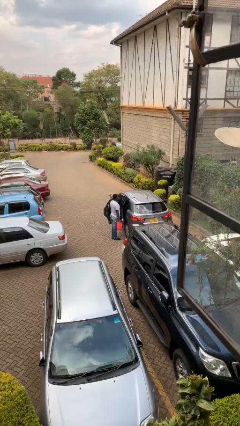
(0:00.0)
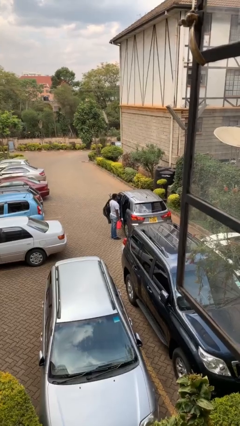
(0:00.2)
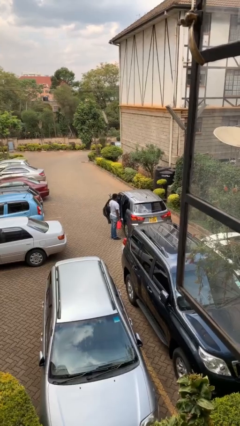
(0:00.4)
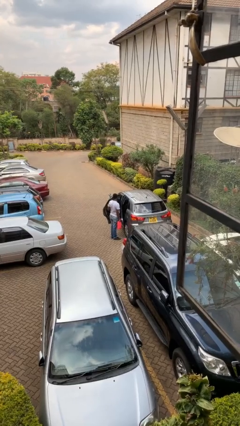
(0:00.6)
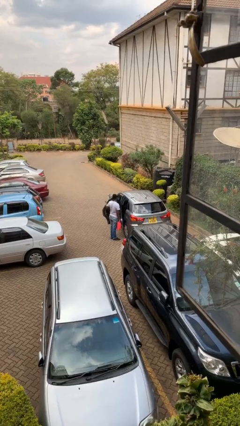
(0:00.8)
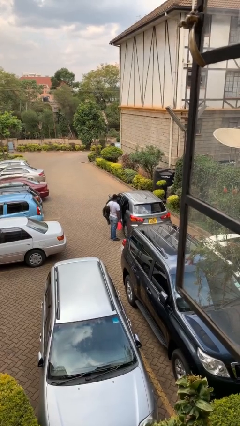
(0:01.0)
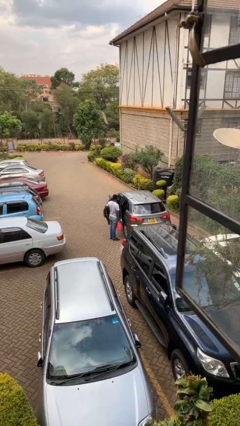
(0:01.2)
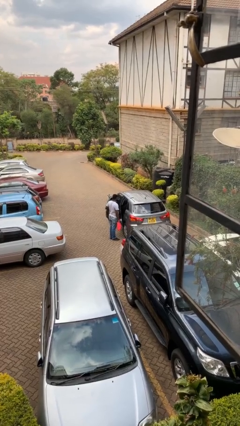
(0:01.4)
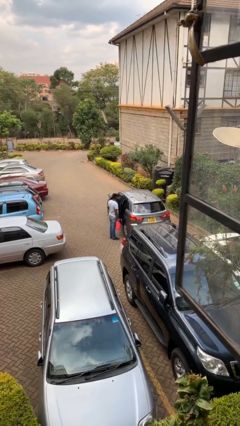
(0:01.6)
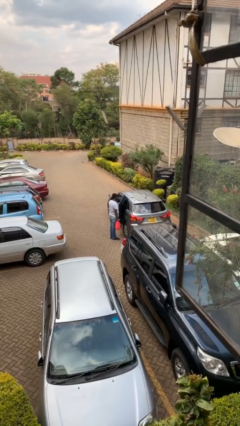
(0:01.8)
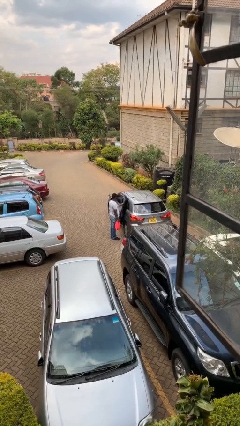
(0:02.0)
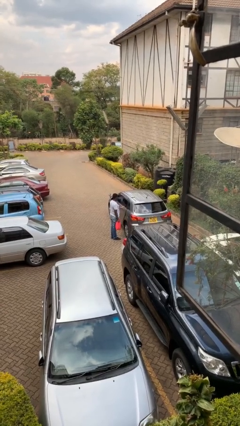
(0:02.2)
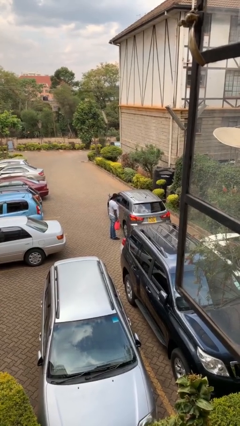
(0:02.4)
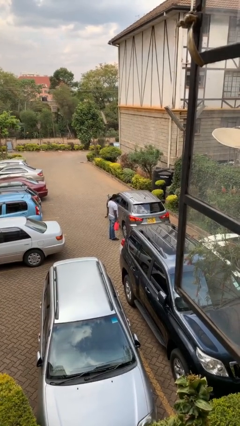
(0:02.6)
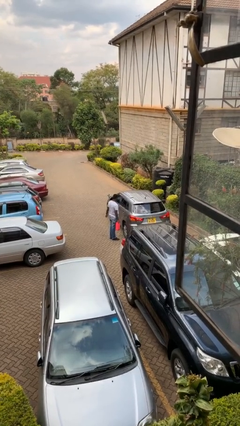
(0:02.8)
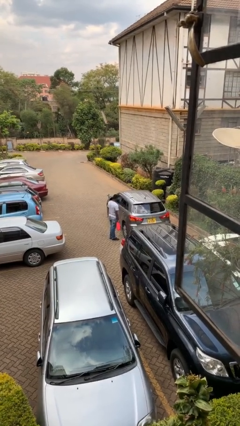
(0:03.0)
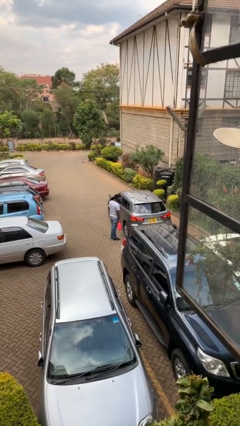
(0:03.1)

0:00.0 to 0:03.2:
person closes car door

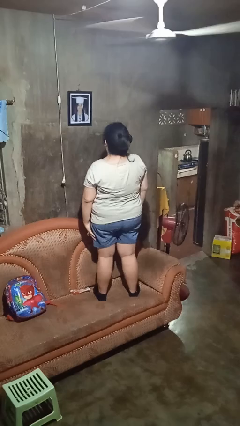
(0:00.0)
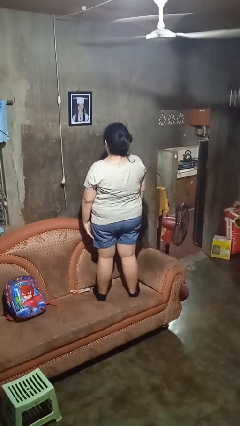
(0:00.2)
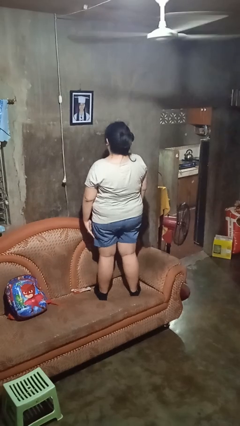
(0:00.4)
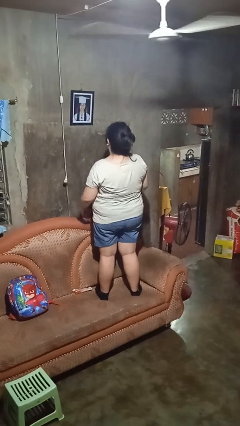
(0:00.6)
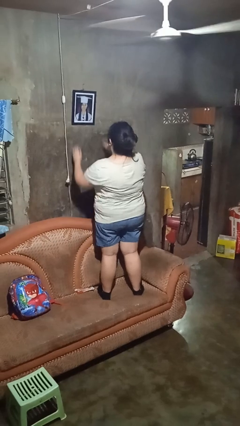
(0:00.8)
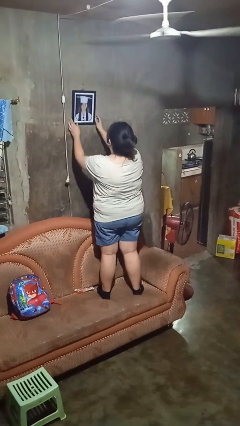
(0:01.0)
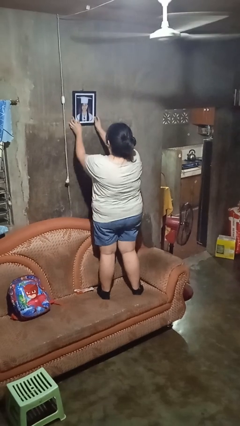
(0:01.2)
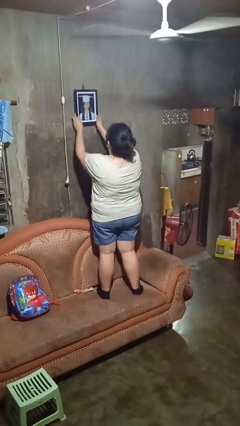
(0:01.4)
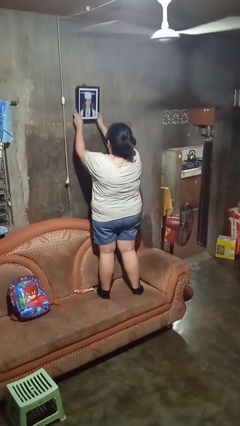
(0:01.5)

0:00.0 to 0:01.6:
person takes down picture frame

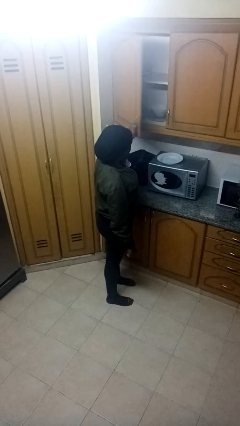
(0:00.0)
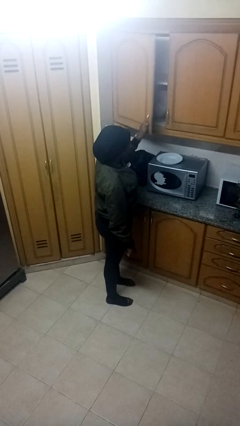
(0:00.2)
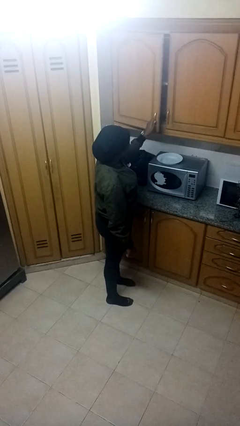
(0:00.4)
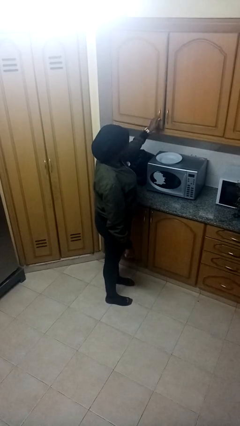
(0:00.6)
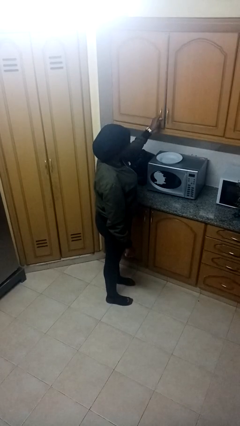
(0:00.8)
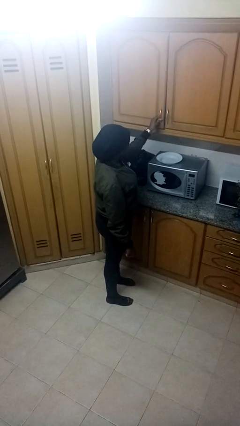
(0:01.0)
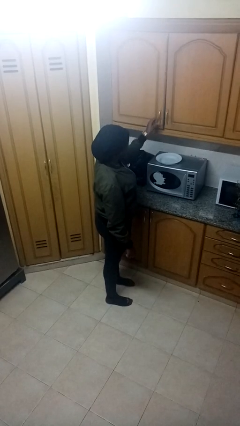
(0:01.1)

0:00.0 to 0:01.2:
person closes cabinet

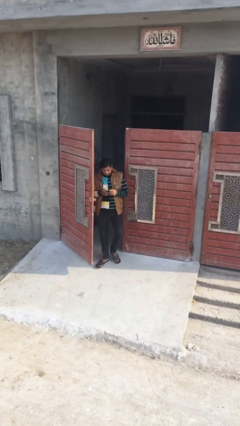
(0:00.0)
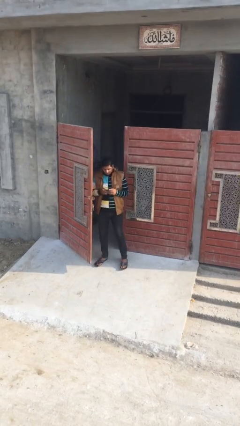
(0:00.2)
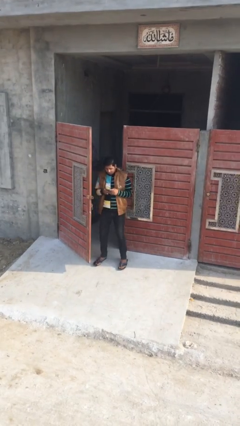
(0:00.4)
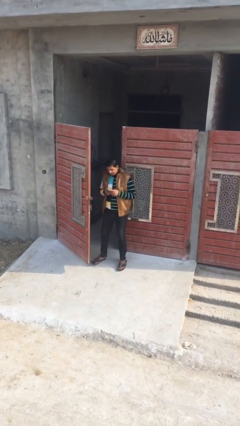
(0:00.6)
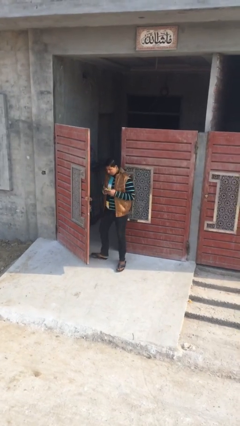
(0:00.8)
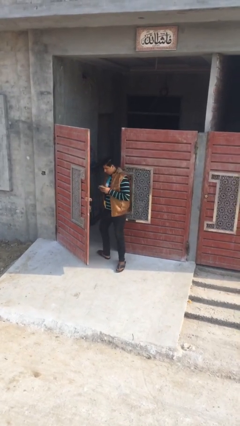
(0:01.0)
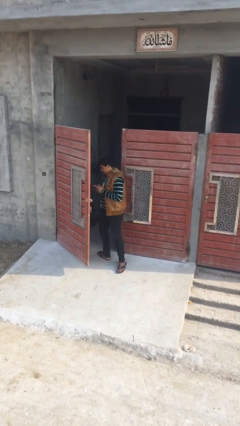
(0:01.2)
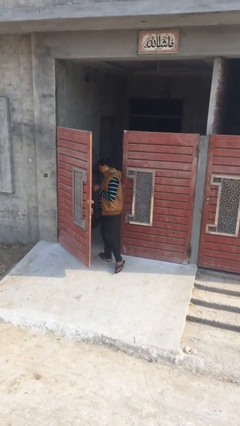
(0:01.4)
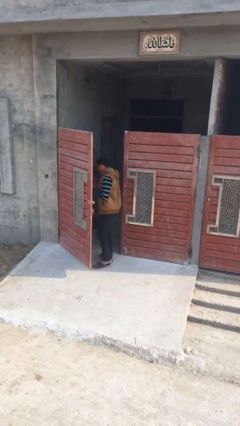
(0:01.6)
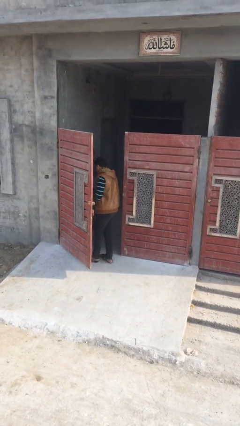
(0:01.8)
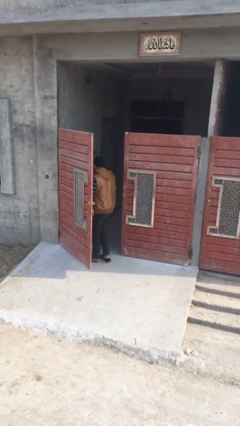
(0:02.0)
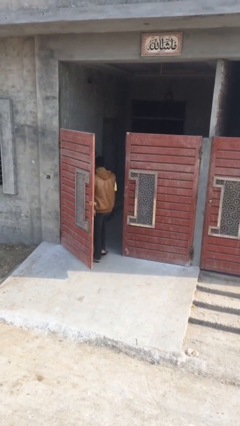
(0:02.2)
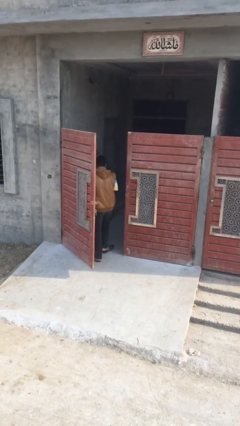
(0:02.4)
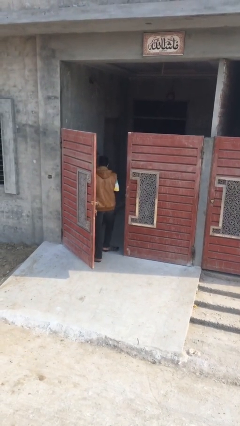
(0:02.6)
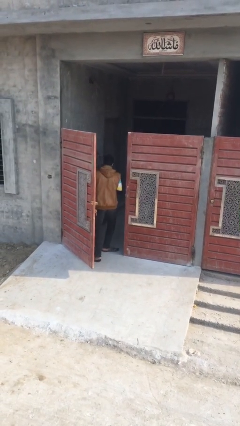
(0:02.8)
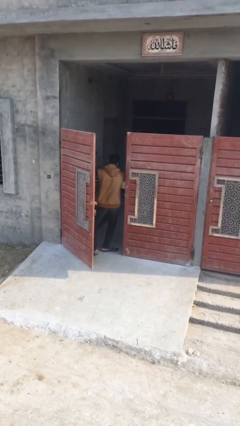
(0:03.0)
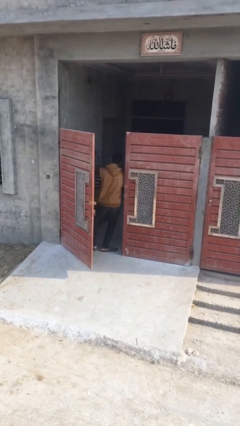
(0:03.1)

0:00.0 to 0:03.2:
person exits scene through structure

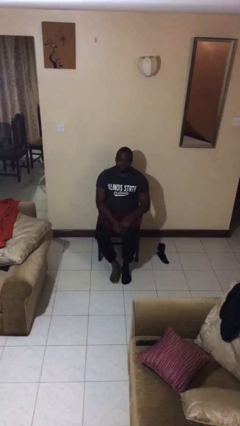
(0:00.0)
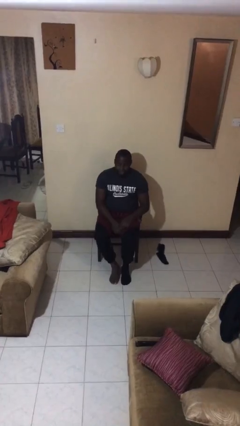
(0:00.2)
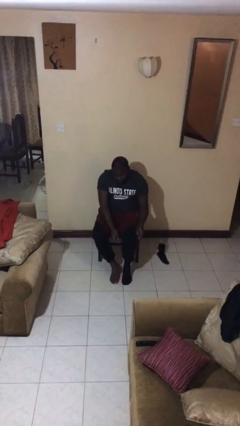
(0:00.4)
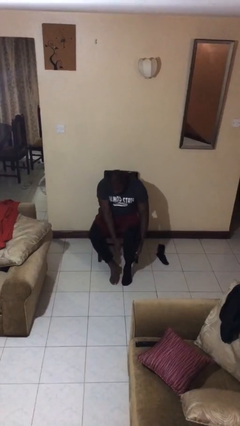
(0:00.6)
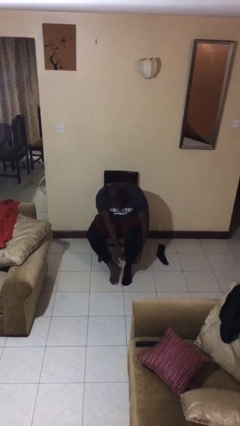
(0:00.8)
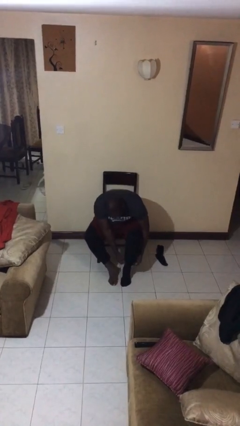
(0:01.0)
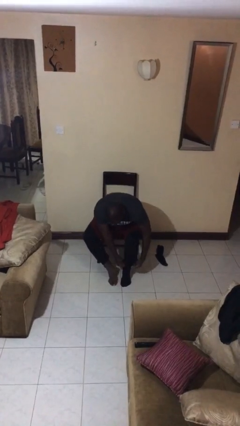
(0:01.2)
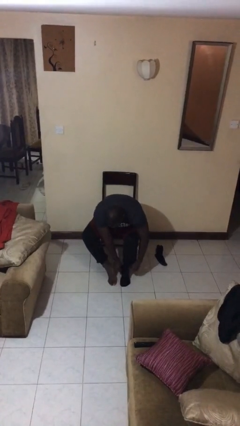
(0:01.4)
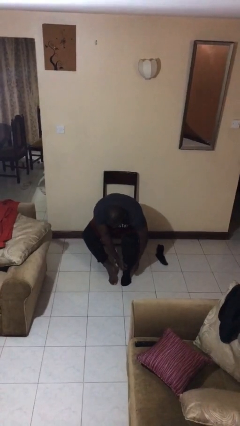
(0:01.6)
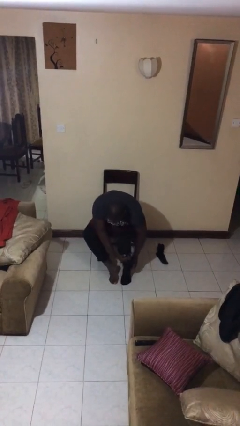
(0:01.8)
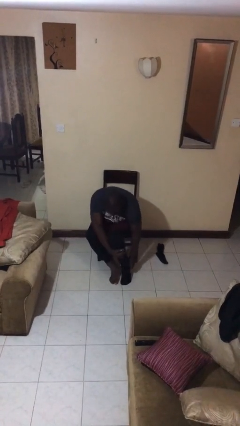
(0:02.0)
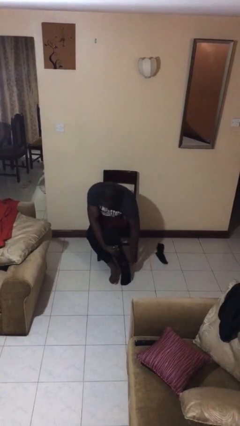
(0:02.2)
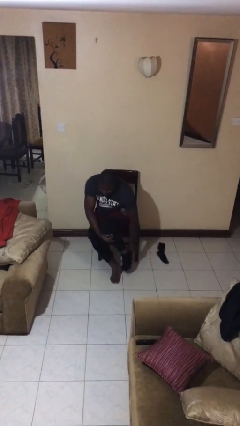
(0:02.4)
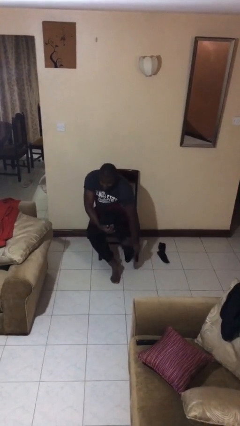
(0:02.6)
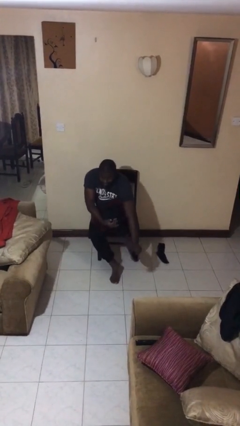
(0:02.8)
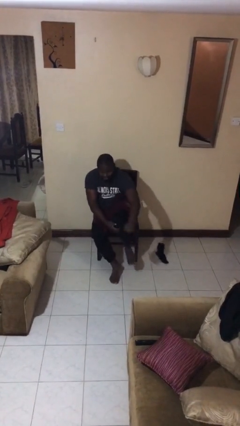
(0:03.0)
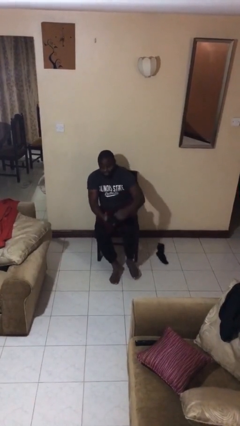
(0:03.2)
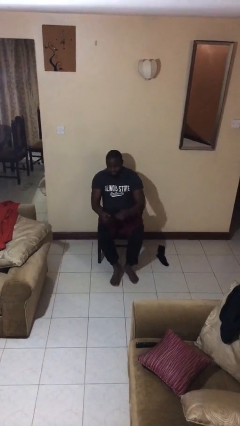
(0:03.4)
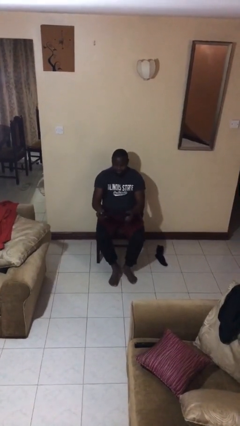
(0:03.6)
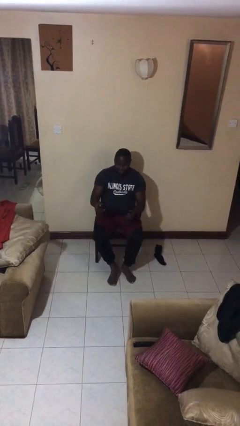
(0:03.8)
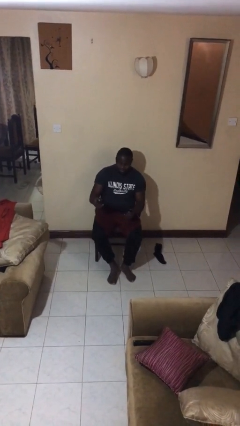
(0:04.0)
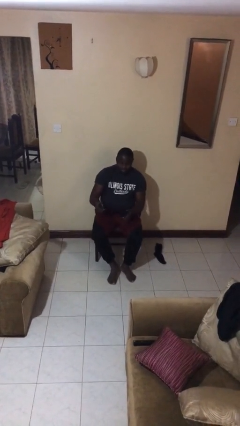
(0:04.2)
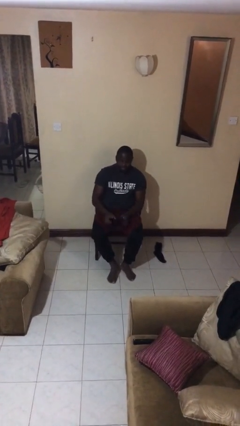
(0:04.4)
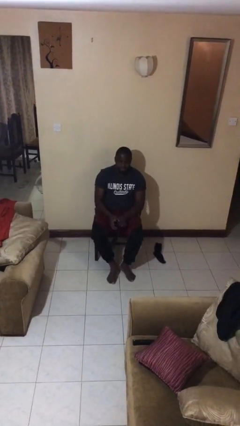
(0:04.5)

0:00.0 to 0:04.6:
person takes off socks

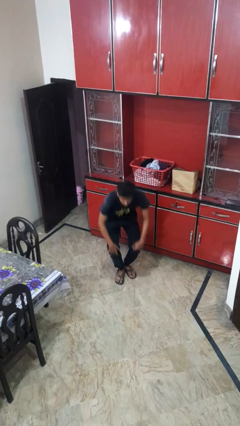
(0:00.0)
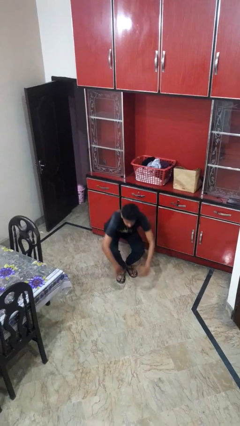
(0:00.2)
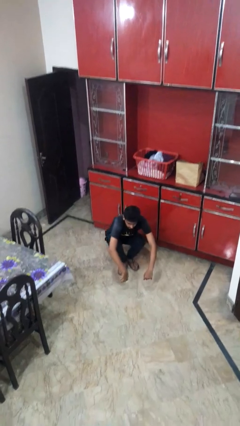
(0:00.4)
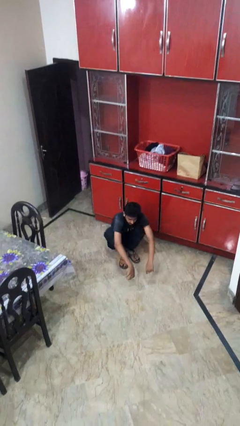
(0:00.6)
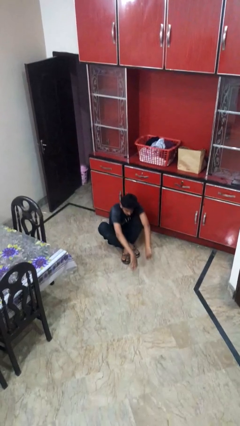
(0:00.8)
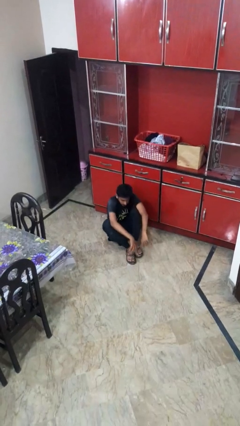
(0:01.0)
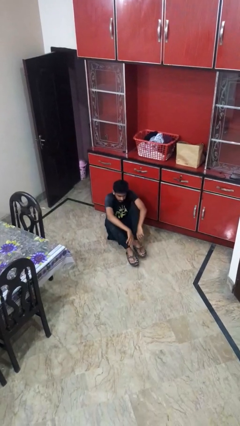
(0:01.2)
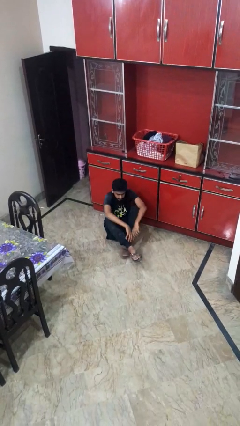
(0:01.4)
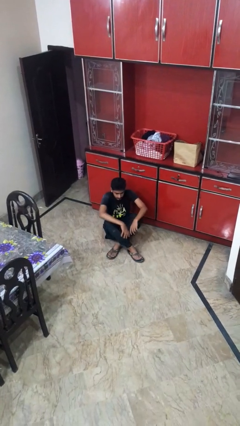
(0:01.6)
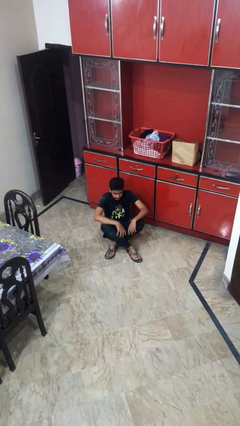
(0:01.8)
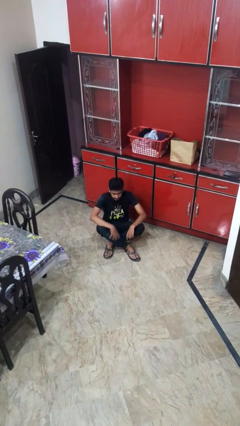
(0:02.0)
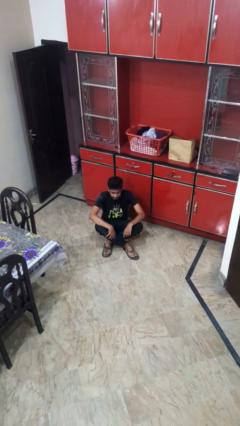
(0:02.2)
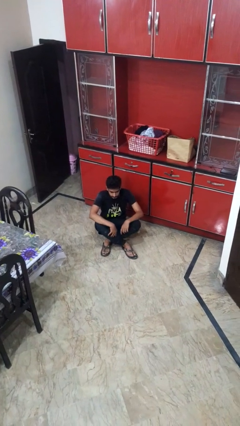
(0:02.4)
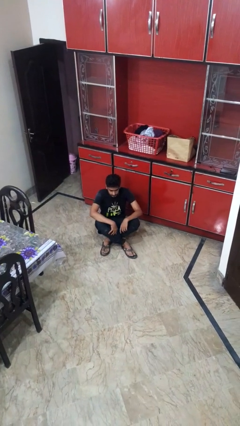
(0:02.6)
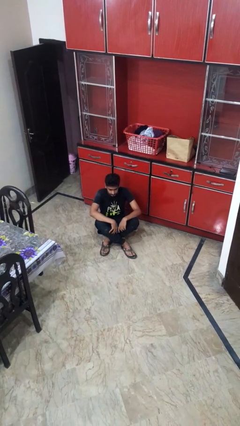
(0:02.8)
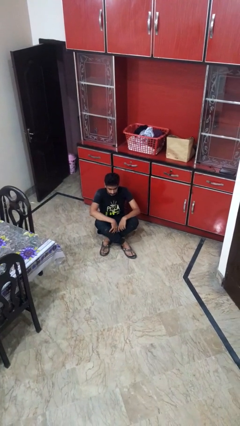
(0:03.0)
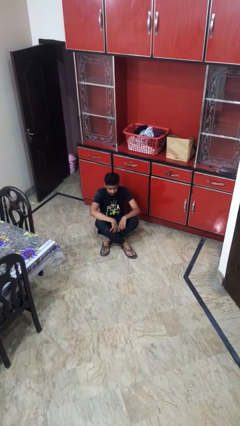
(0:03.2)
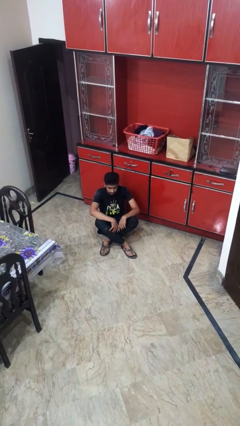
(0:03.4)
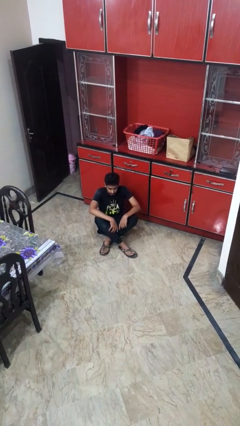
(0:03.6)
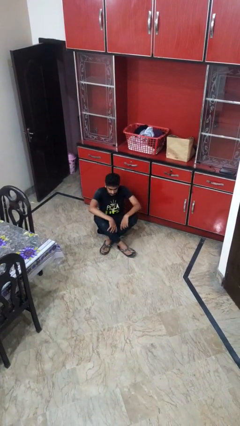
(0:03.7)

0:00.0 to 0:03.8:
person sits crisscross
